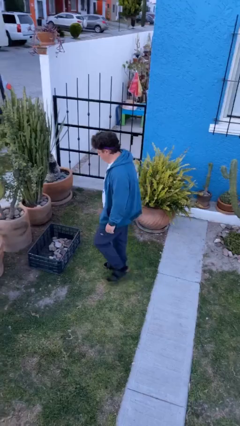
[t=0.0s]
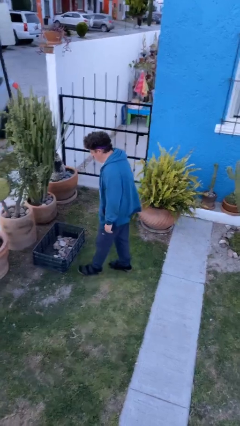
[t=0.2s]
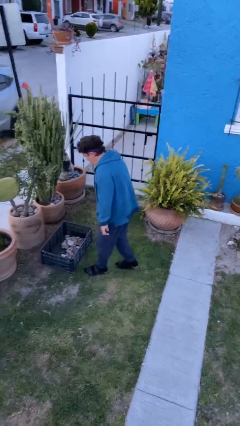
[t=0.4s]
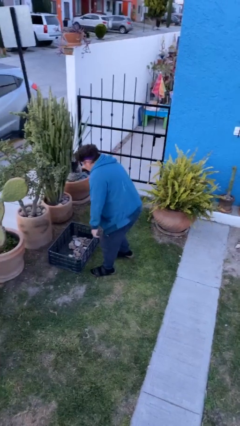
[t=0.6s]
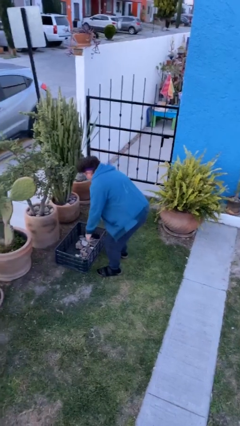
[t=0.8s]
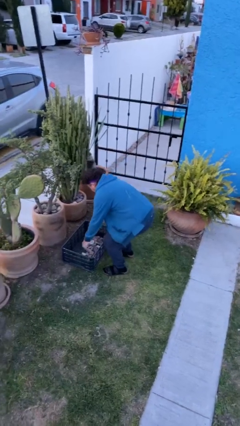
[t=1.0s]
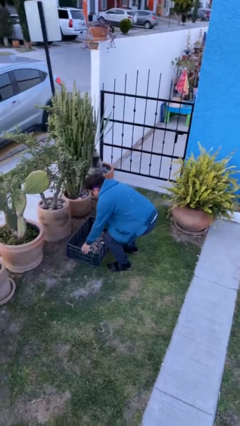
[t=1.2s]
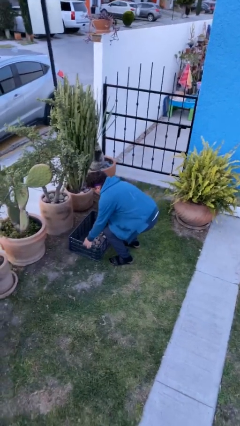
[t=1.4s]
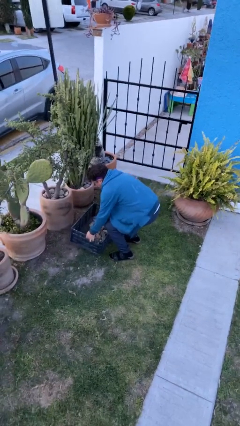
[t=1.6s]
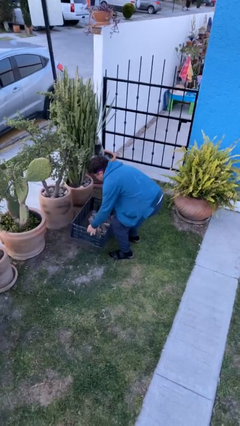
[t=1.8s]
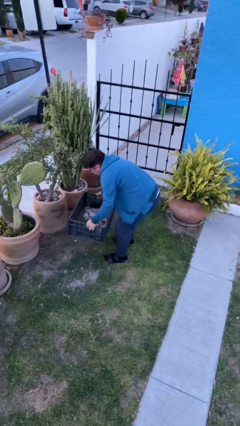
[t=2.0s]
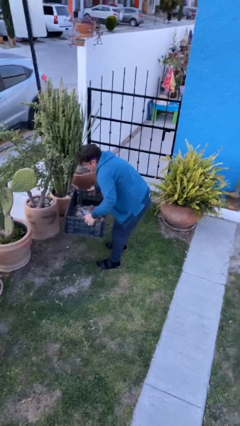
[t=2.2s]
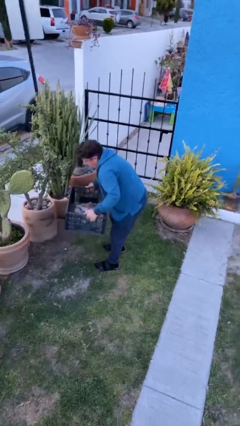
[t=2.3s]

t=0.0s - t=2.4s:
person picks up object from floor

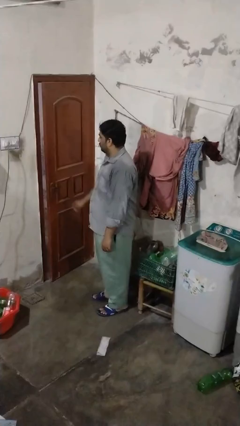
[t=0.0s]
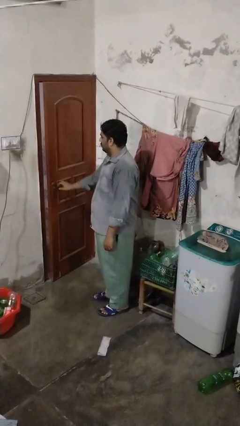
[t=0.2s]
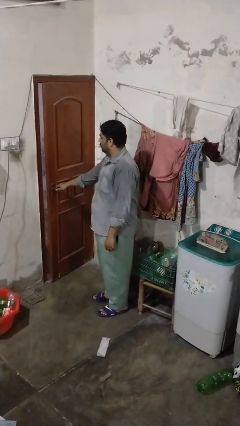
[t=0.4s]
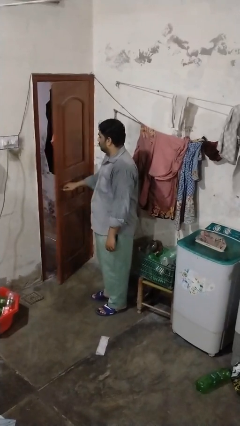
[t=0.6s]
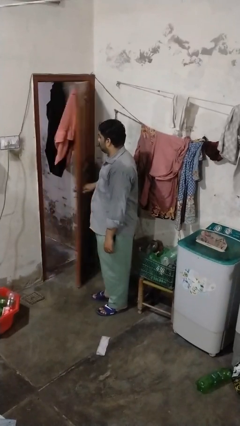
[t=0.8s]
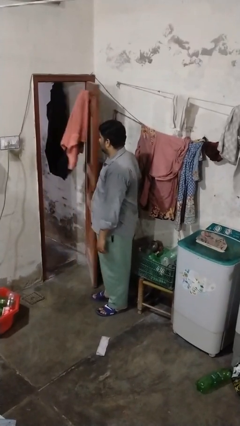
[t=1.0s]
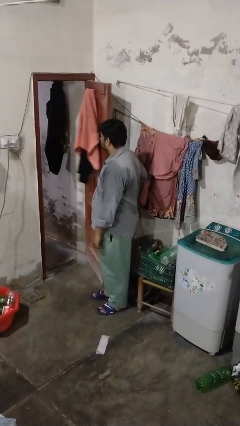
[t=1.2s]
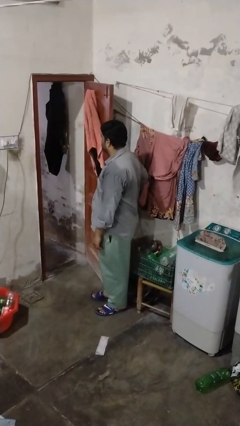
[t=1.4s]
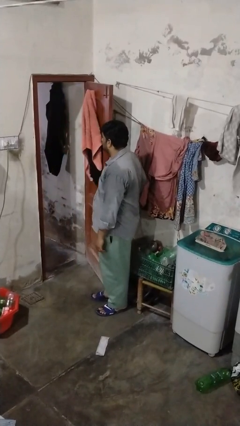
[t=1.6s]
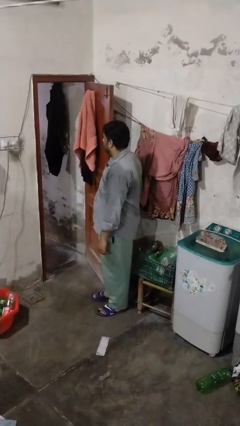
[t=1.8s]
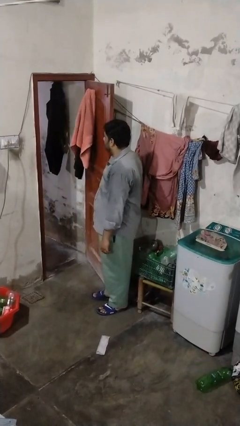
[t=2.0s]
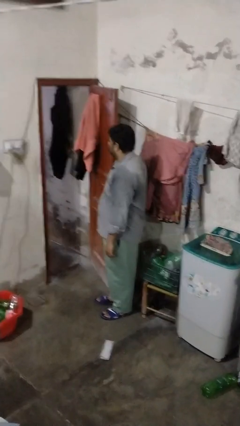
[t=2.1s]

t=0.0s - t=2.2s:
person opens closet door

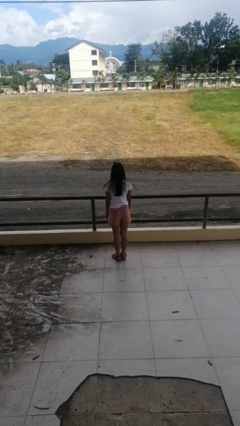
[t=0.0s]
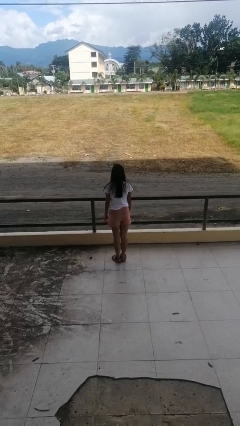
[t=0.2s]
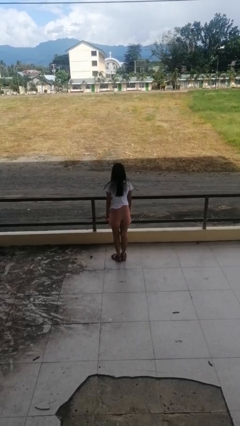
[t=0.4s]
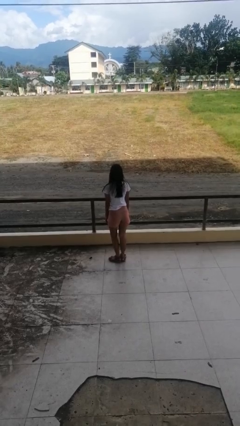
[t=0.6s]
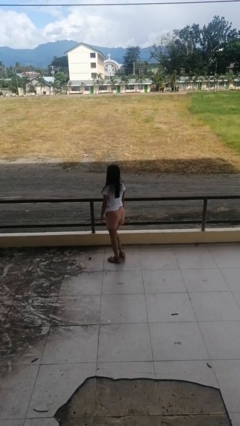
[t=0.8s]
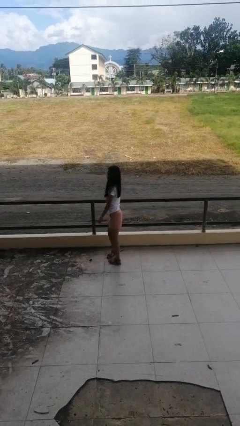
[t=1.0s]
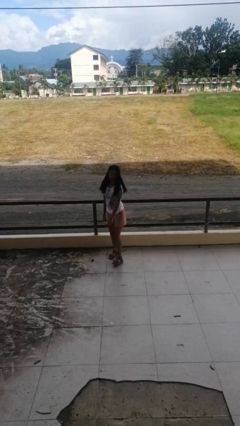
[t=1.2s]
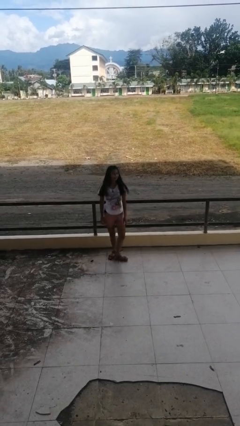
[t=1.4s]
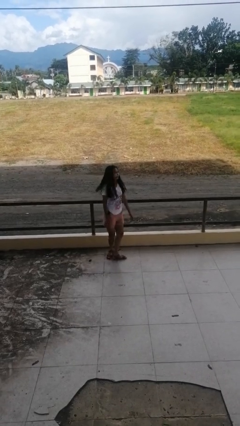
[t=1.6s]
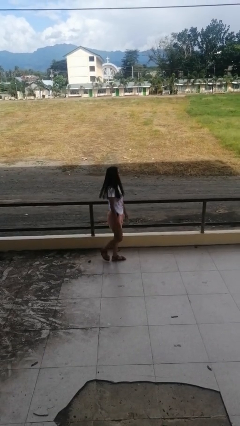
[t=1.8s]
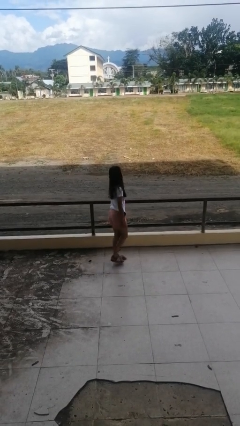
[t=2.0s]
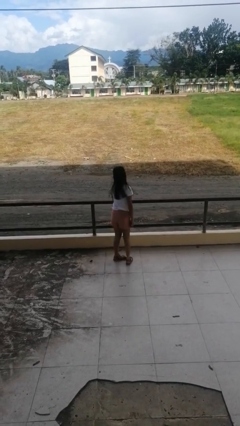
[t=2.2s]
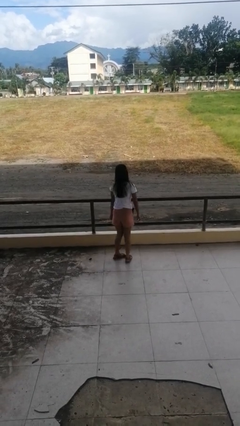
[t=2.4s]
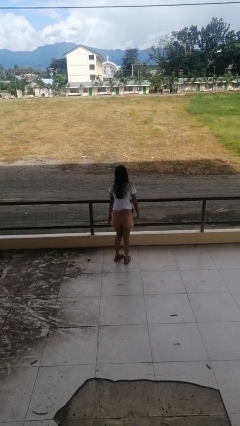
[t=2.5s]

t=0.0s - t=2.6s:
person twirls

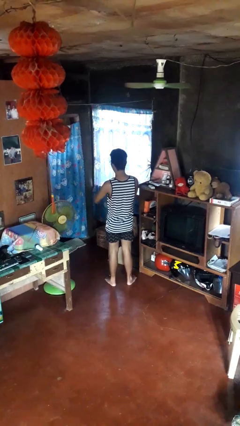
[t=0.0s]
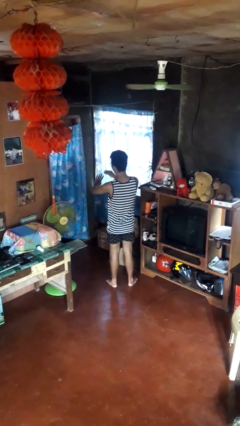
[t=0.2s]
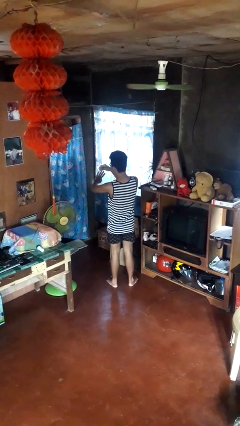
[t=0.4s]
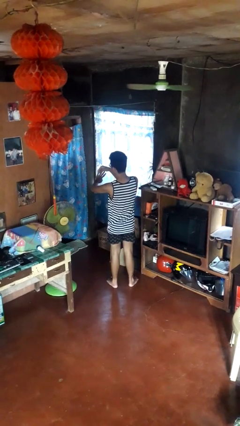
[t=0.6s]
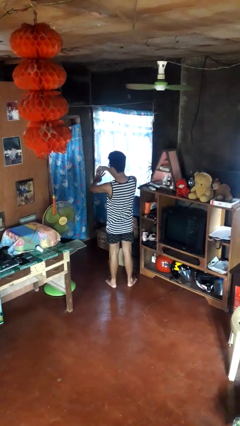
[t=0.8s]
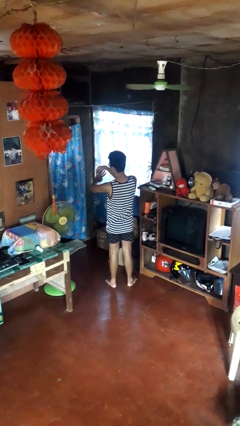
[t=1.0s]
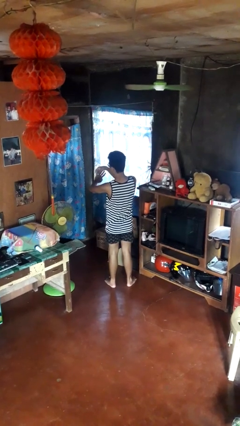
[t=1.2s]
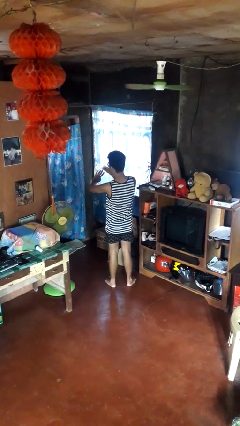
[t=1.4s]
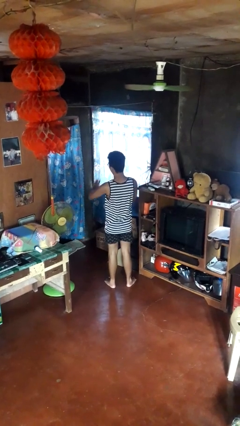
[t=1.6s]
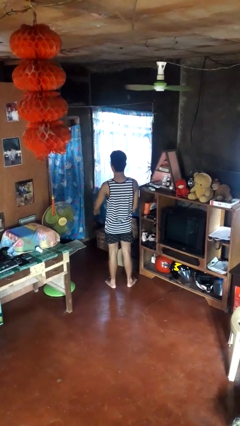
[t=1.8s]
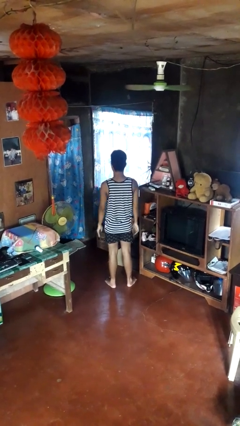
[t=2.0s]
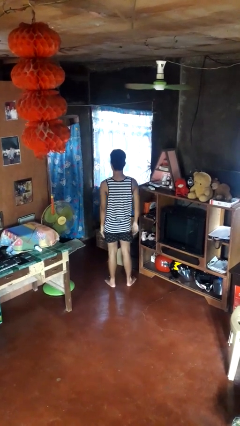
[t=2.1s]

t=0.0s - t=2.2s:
person puts on ring

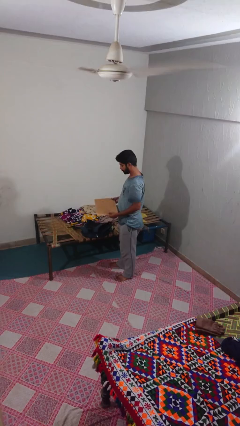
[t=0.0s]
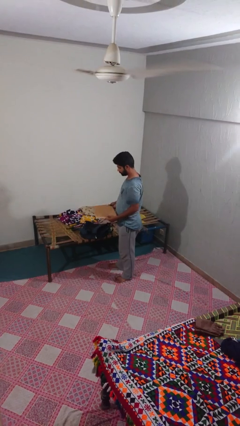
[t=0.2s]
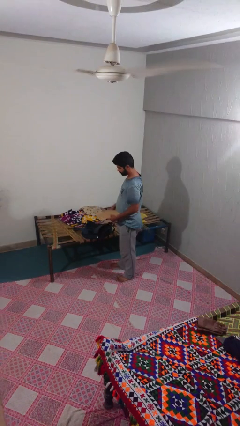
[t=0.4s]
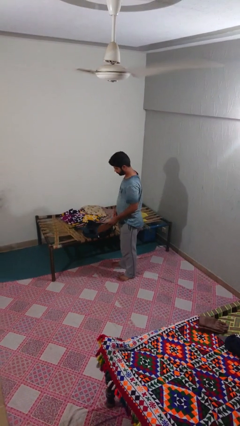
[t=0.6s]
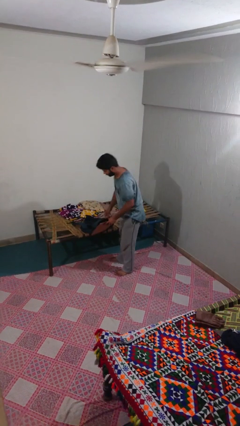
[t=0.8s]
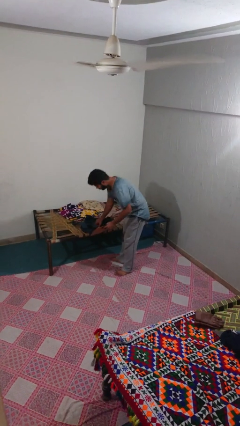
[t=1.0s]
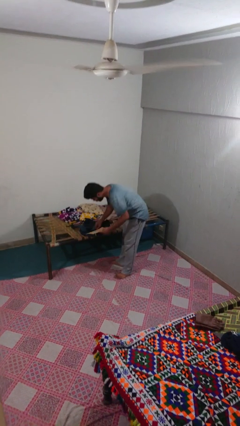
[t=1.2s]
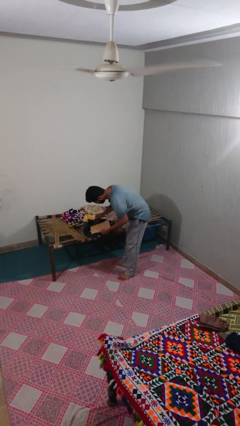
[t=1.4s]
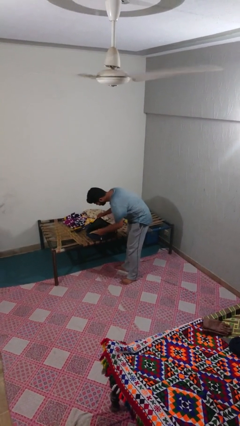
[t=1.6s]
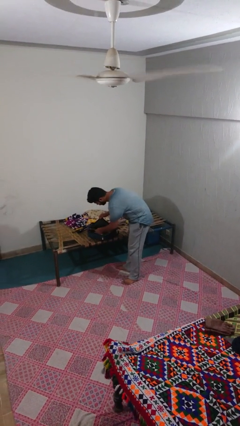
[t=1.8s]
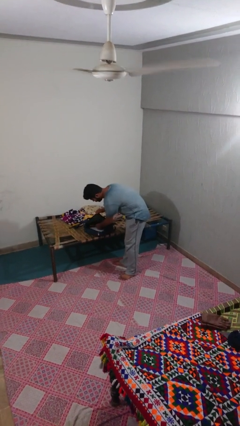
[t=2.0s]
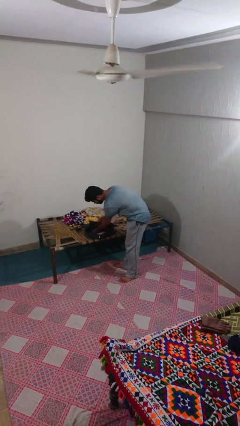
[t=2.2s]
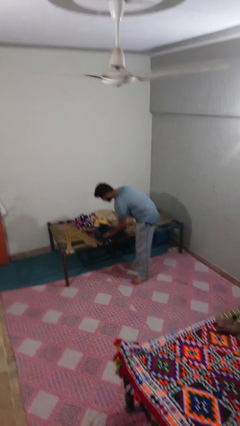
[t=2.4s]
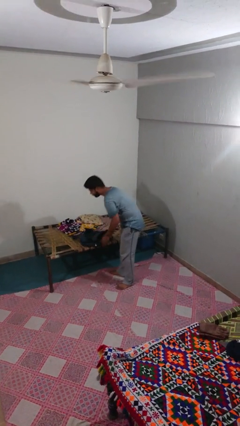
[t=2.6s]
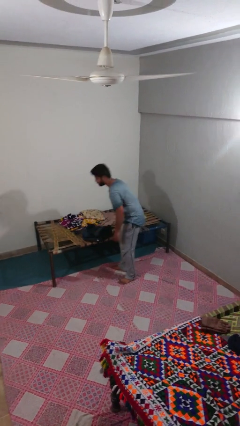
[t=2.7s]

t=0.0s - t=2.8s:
person puts object into backpack

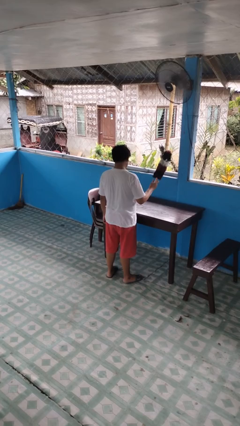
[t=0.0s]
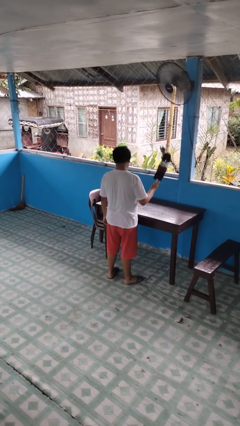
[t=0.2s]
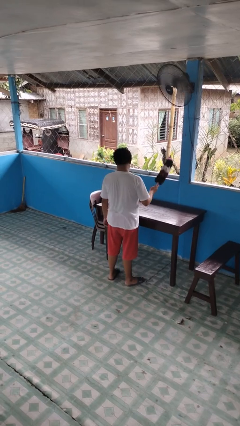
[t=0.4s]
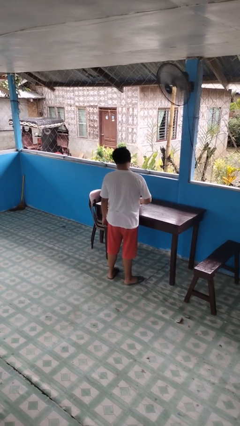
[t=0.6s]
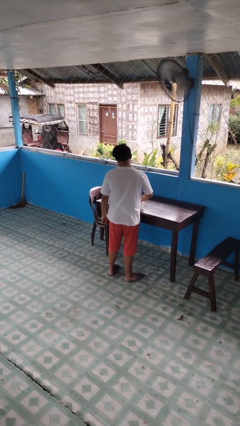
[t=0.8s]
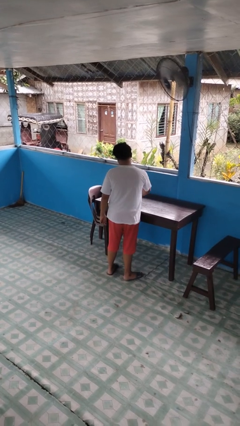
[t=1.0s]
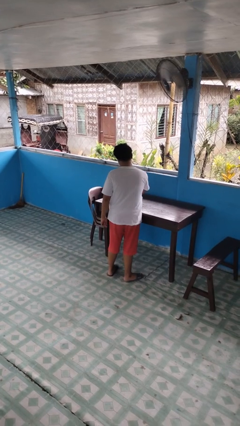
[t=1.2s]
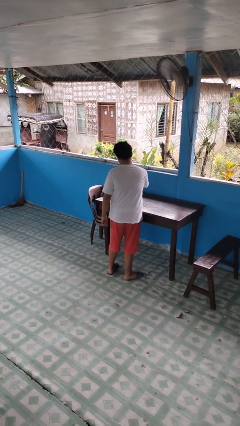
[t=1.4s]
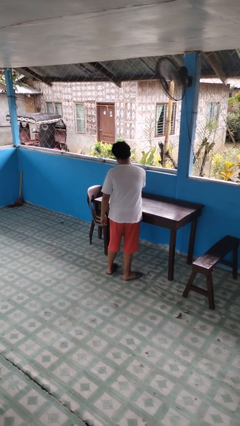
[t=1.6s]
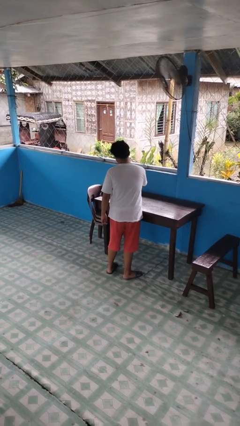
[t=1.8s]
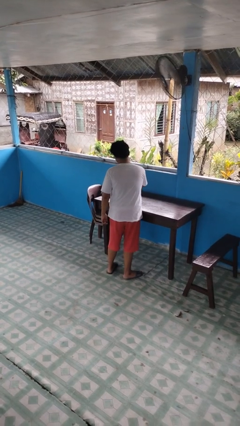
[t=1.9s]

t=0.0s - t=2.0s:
person dusts furniture

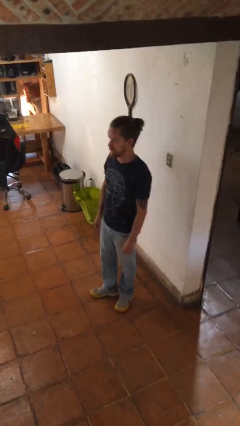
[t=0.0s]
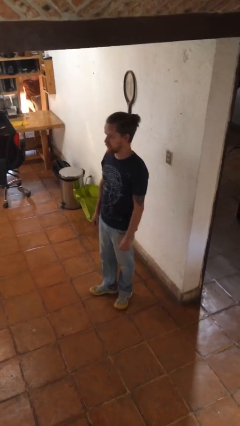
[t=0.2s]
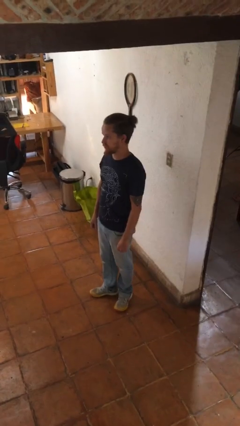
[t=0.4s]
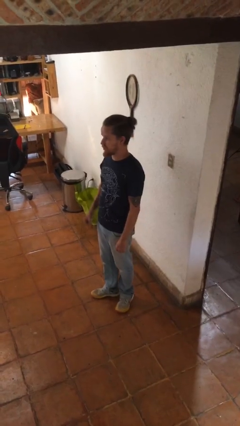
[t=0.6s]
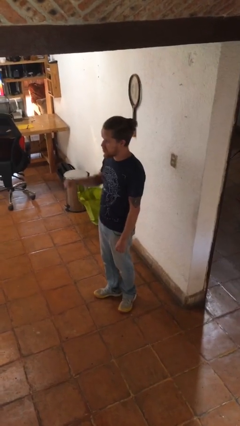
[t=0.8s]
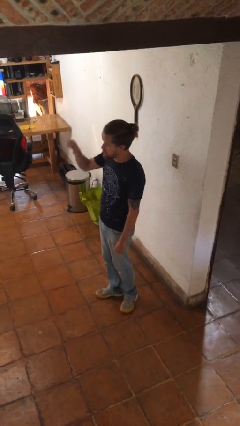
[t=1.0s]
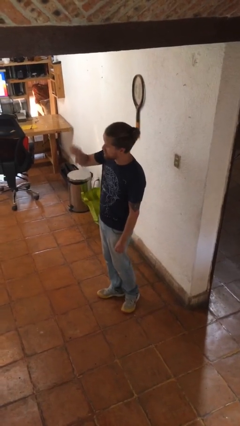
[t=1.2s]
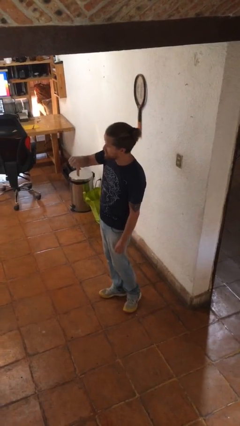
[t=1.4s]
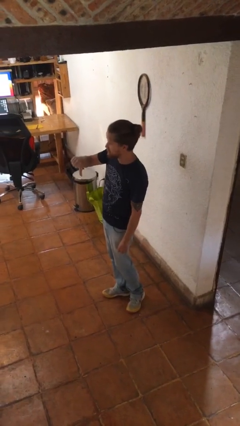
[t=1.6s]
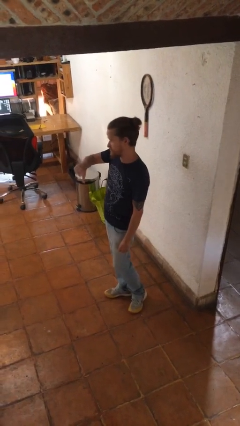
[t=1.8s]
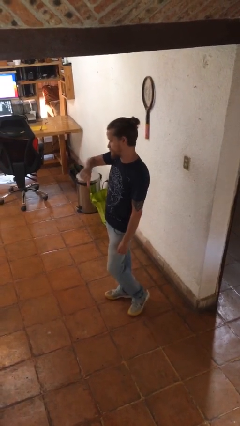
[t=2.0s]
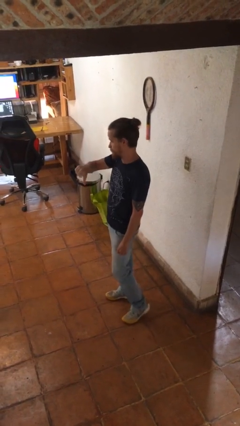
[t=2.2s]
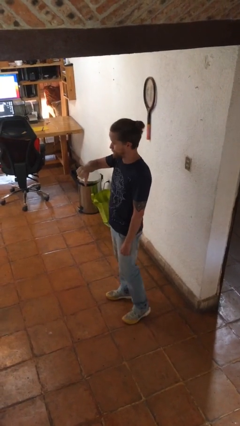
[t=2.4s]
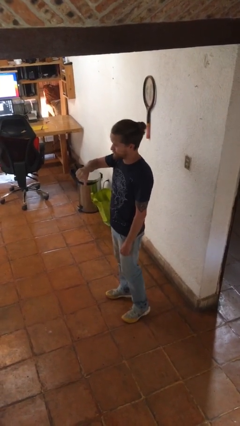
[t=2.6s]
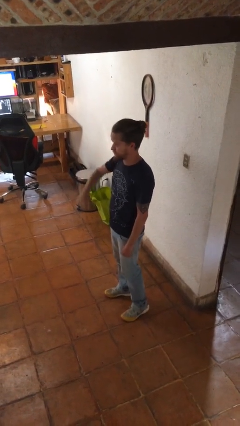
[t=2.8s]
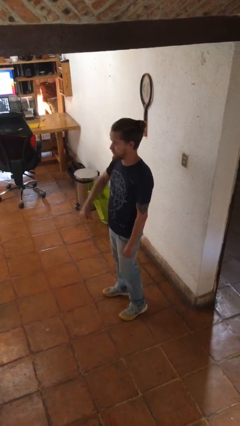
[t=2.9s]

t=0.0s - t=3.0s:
person gestures thumbs down
